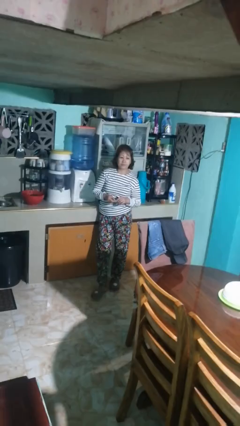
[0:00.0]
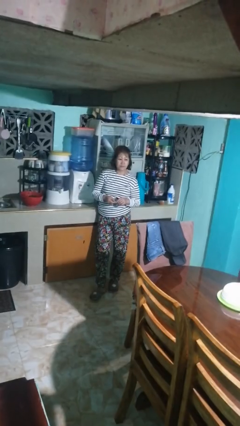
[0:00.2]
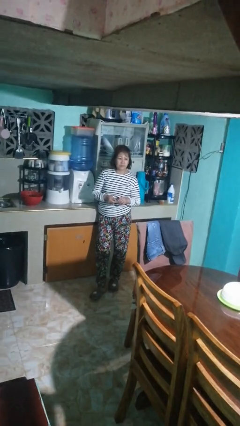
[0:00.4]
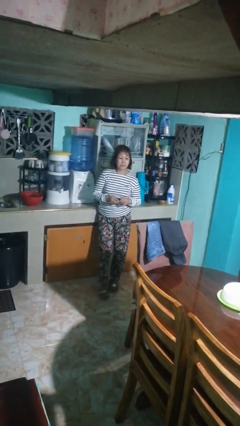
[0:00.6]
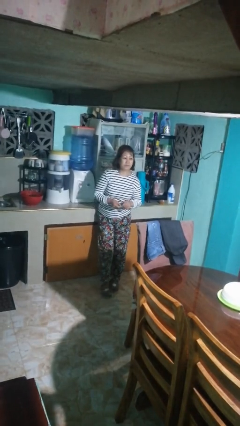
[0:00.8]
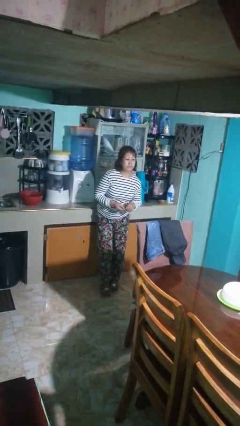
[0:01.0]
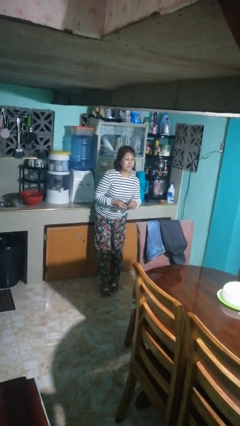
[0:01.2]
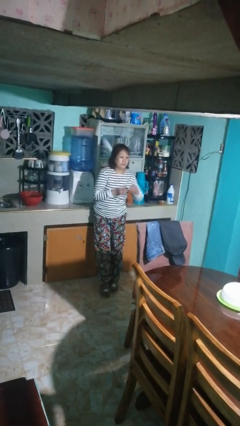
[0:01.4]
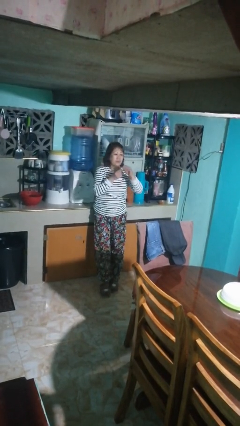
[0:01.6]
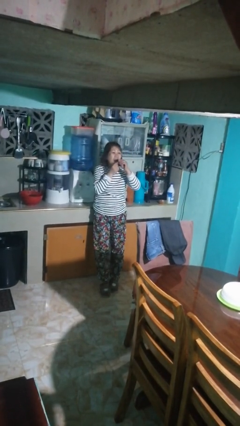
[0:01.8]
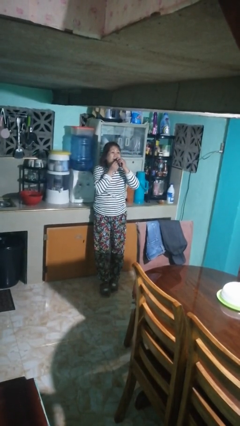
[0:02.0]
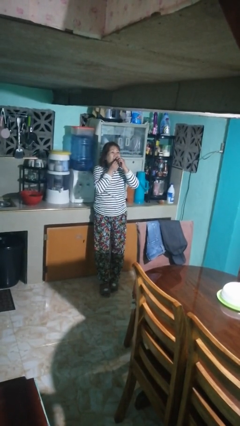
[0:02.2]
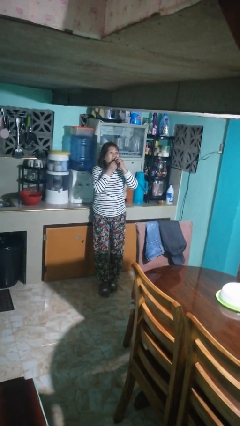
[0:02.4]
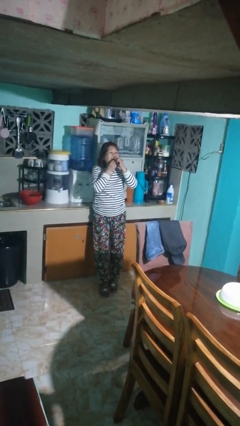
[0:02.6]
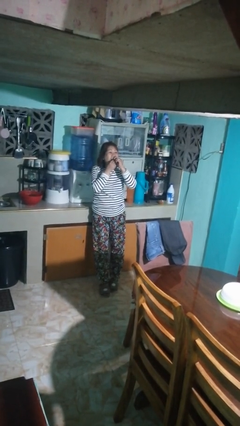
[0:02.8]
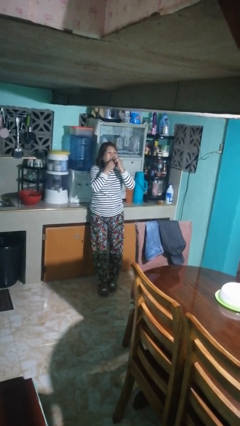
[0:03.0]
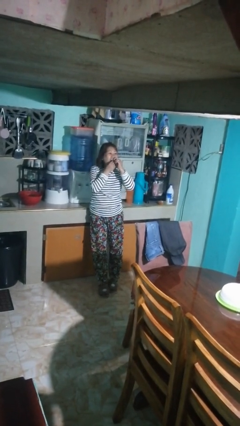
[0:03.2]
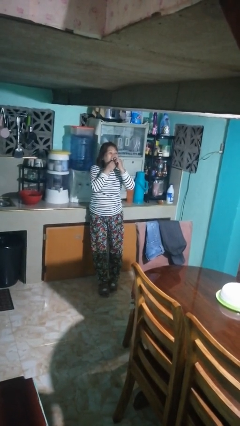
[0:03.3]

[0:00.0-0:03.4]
person flosses

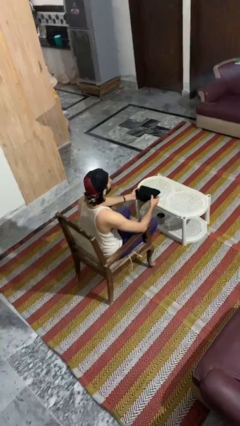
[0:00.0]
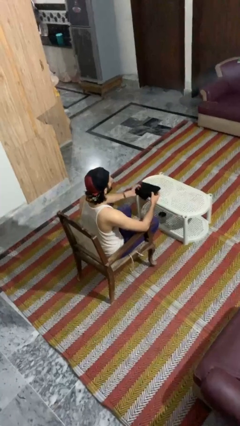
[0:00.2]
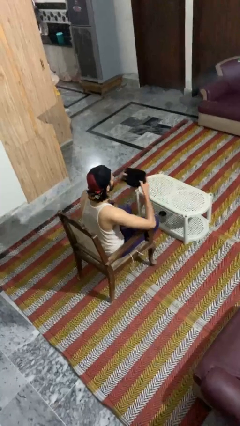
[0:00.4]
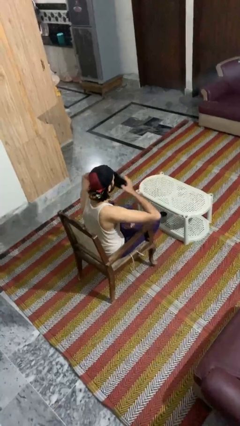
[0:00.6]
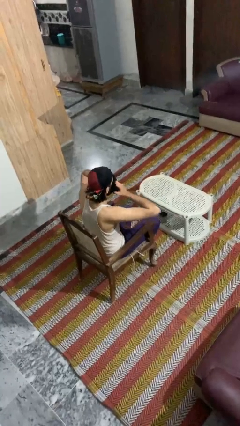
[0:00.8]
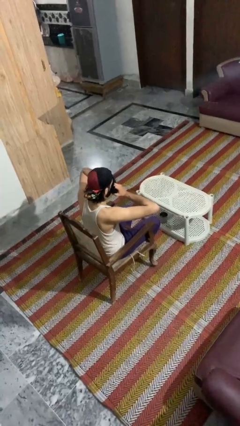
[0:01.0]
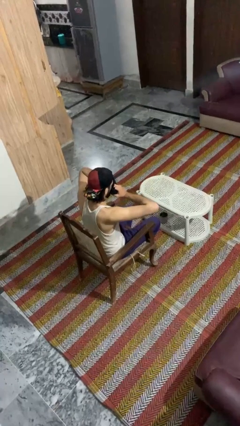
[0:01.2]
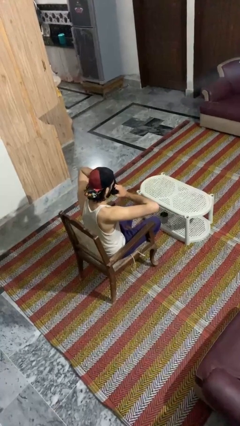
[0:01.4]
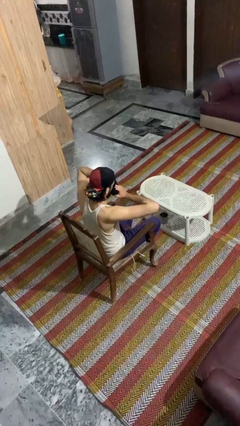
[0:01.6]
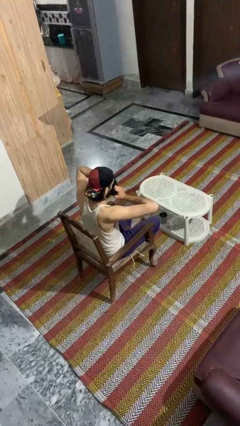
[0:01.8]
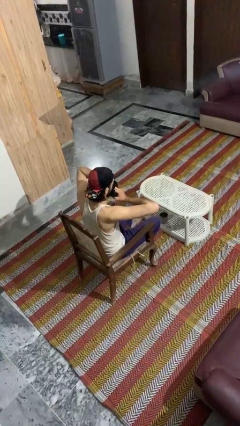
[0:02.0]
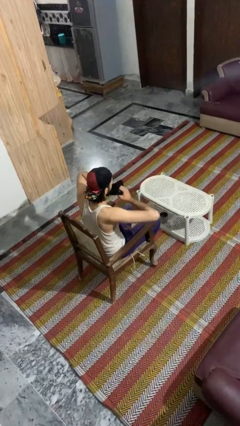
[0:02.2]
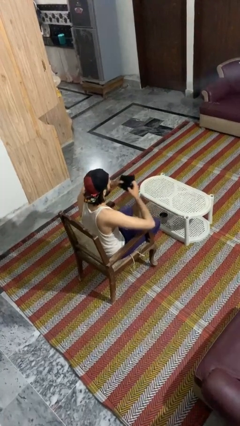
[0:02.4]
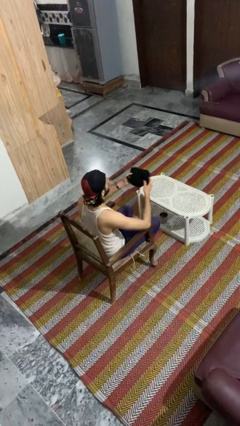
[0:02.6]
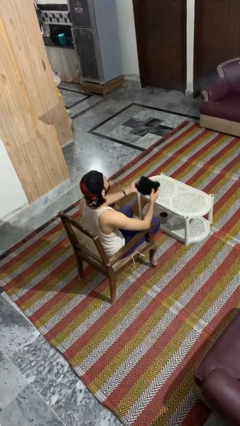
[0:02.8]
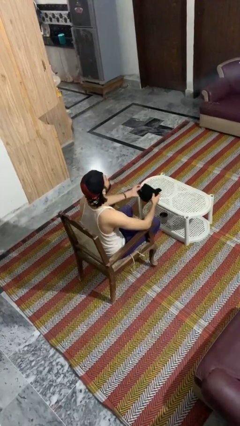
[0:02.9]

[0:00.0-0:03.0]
person blows nose

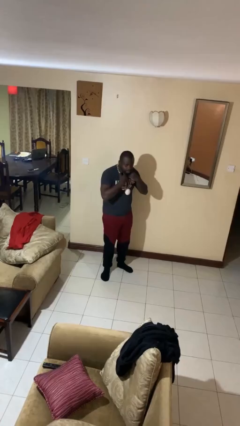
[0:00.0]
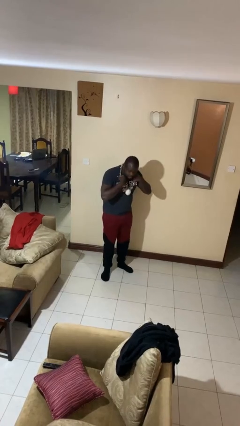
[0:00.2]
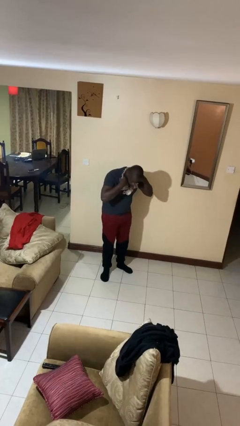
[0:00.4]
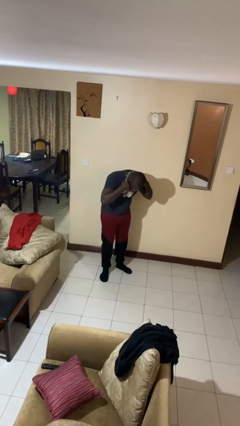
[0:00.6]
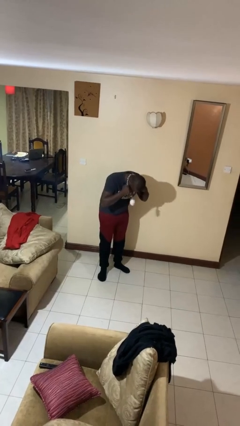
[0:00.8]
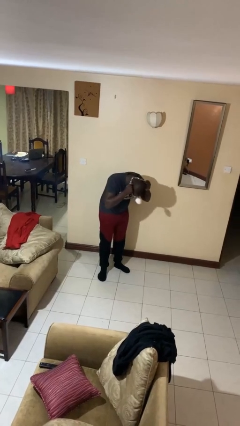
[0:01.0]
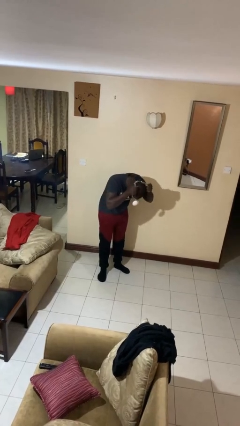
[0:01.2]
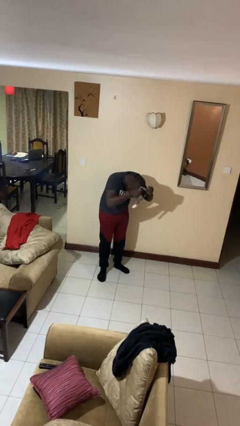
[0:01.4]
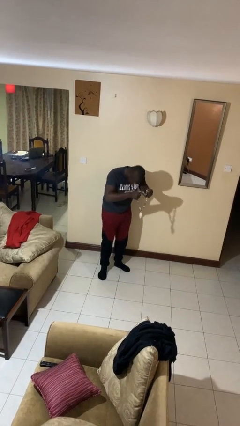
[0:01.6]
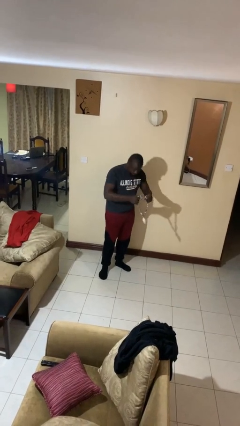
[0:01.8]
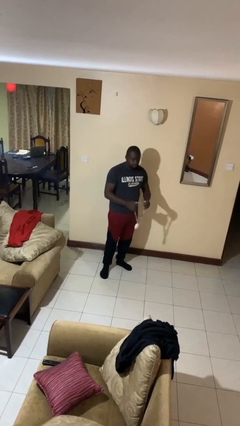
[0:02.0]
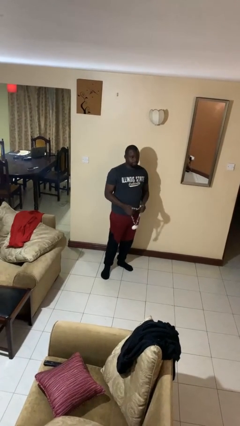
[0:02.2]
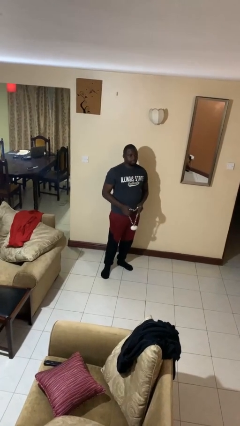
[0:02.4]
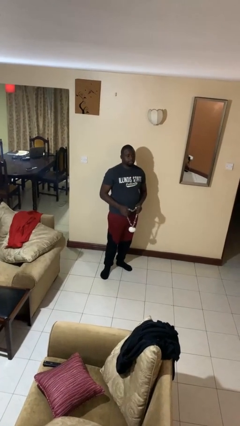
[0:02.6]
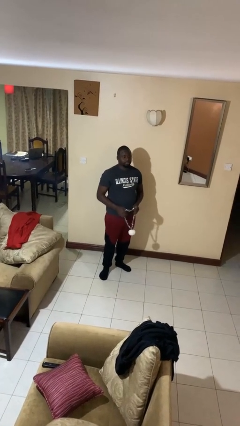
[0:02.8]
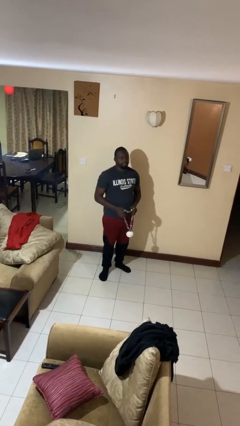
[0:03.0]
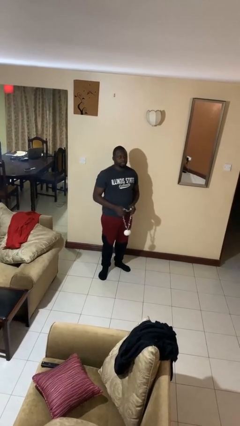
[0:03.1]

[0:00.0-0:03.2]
person takes off necklace

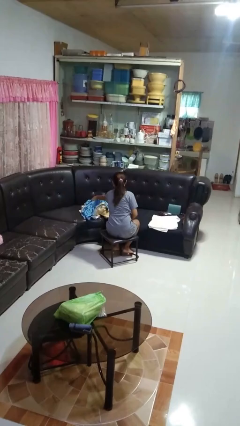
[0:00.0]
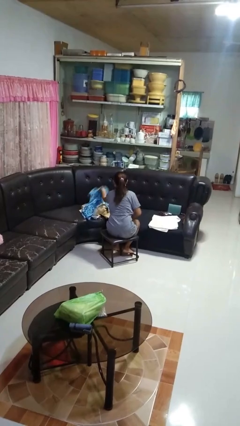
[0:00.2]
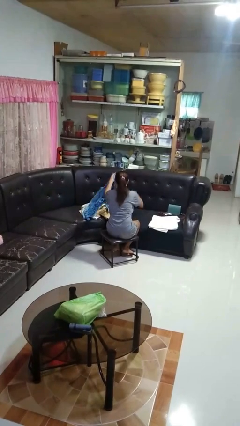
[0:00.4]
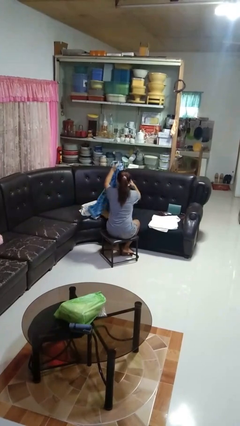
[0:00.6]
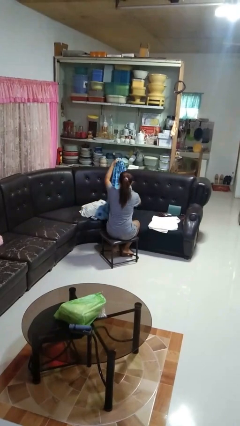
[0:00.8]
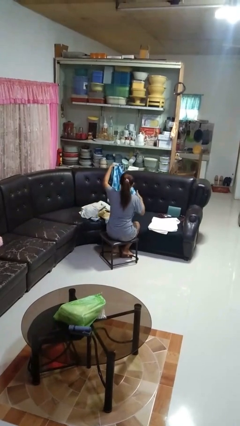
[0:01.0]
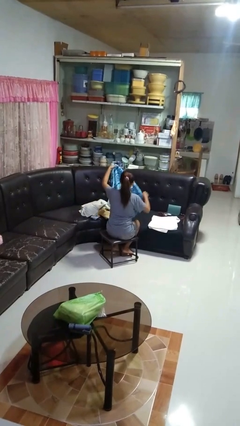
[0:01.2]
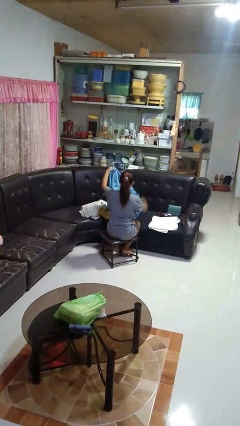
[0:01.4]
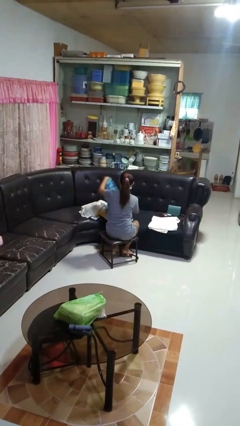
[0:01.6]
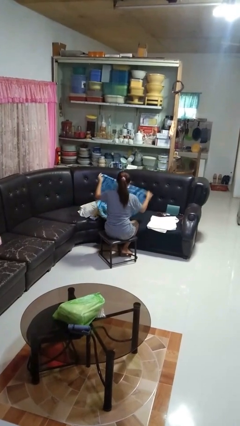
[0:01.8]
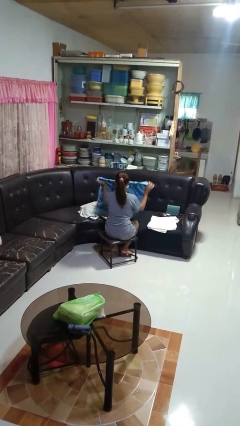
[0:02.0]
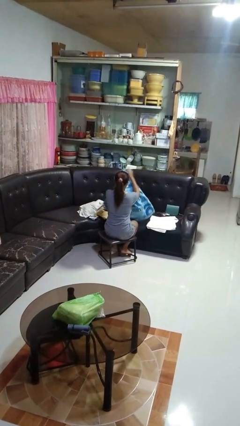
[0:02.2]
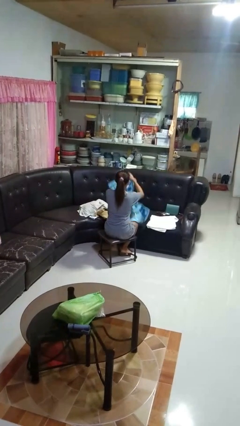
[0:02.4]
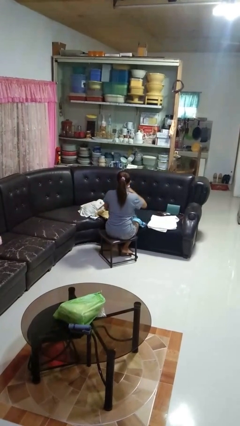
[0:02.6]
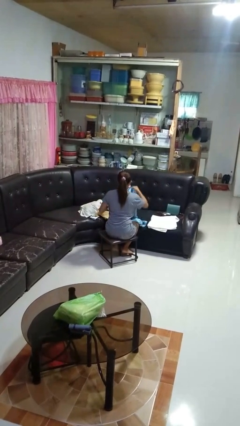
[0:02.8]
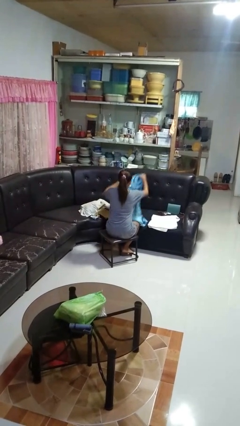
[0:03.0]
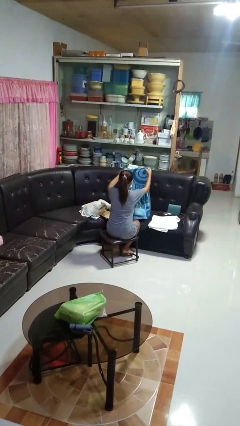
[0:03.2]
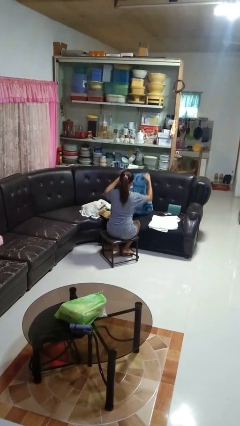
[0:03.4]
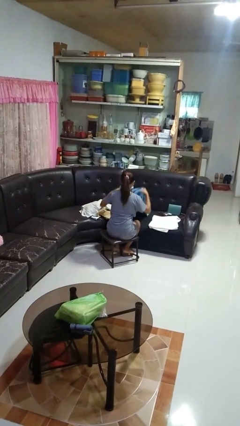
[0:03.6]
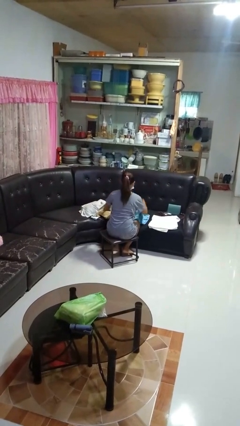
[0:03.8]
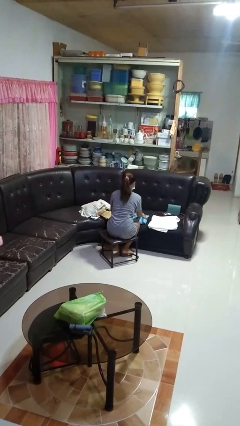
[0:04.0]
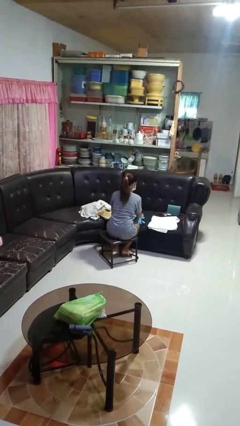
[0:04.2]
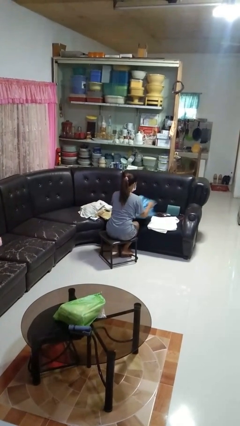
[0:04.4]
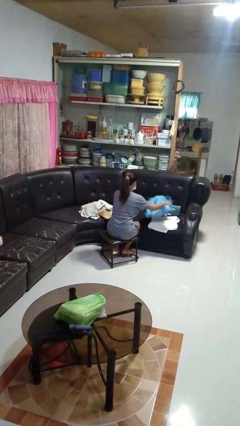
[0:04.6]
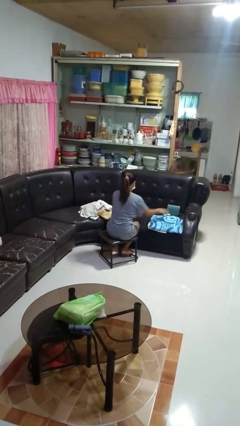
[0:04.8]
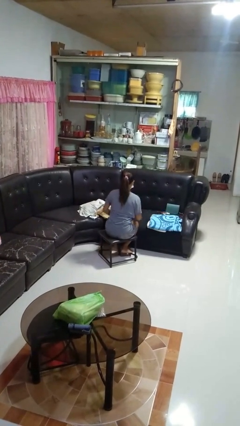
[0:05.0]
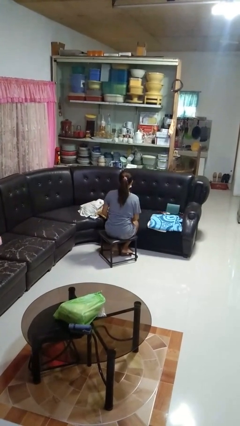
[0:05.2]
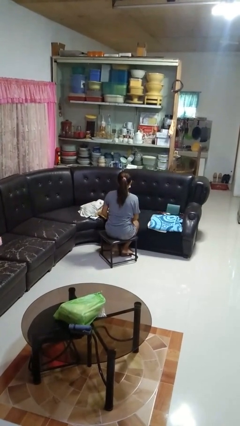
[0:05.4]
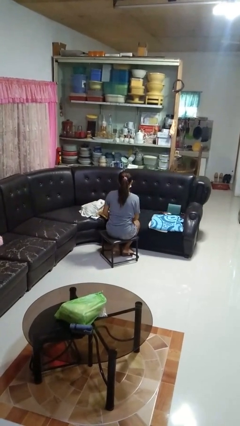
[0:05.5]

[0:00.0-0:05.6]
person folds towel

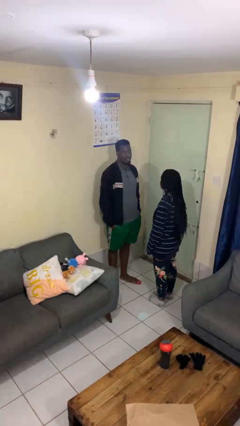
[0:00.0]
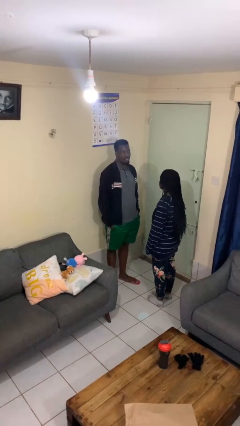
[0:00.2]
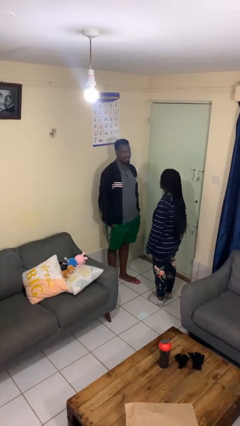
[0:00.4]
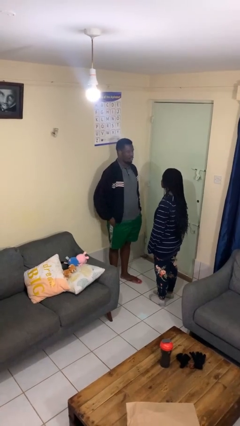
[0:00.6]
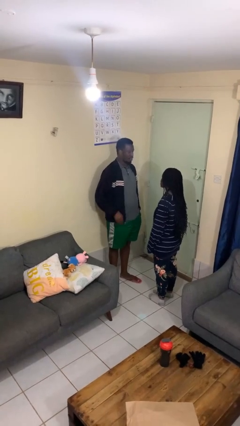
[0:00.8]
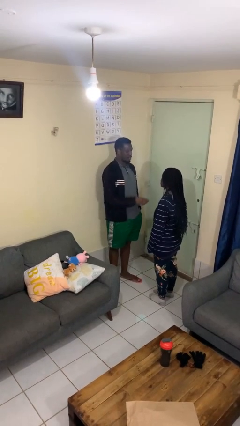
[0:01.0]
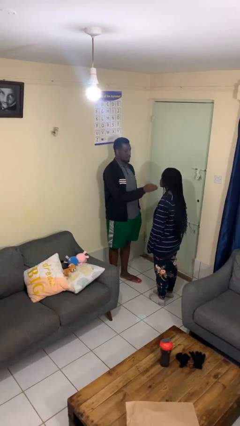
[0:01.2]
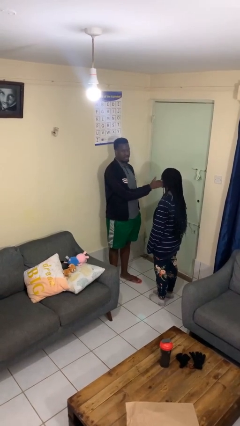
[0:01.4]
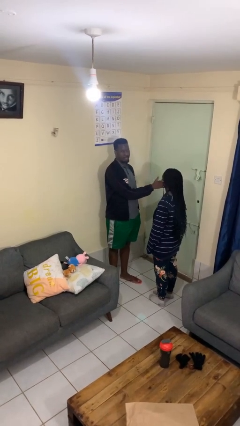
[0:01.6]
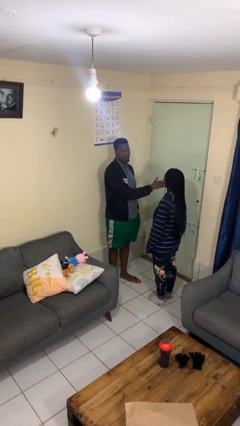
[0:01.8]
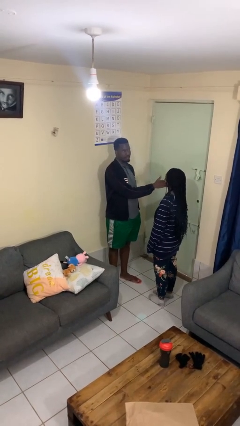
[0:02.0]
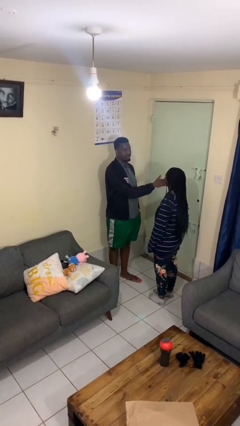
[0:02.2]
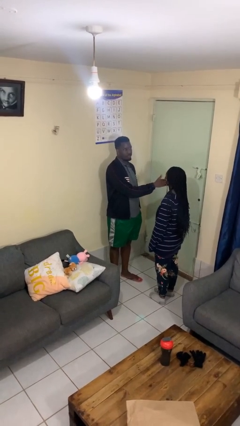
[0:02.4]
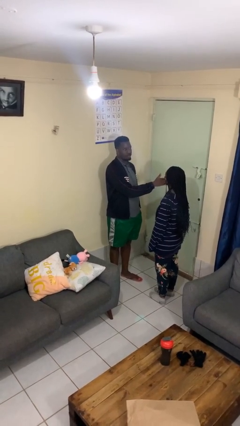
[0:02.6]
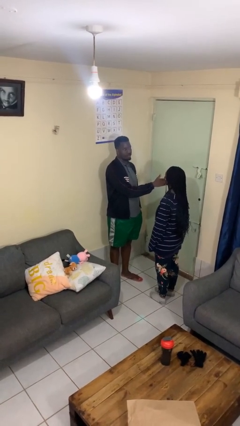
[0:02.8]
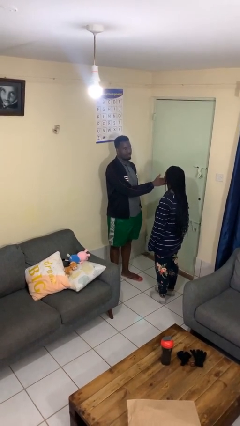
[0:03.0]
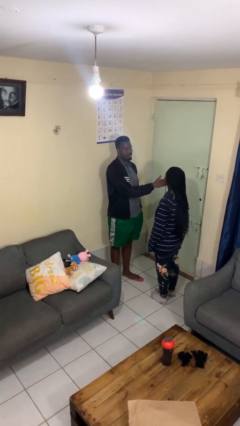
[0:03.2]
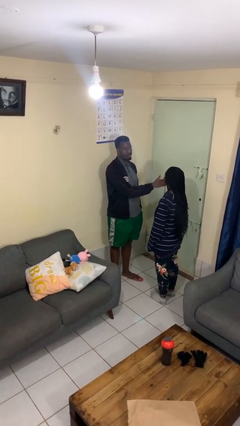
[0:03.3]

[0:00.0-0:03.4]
person touches face of person
